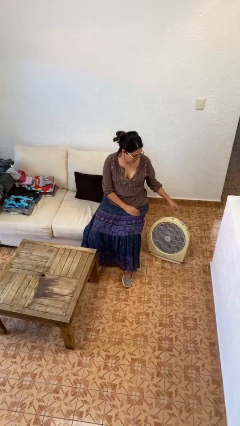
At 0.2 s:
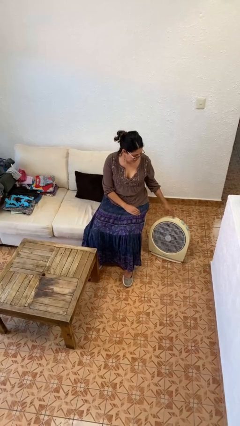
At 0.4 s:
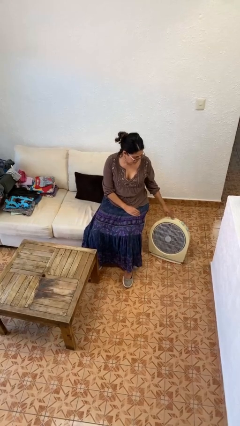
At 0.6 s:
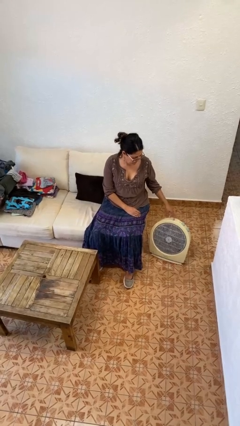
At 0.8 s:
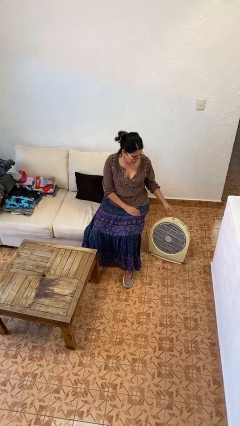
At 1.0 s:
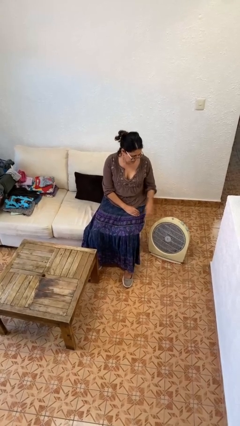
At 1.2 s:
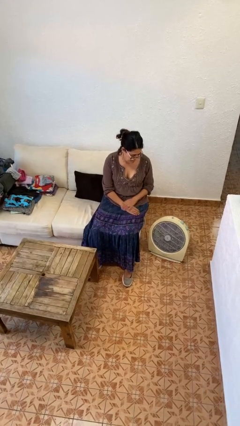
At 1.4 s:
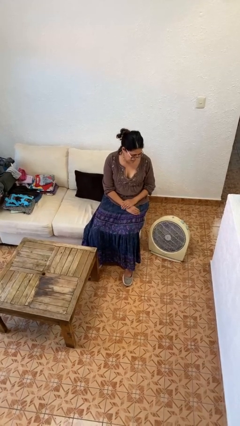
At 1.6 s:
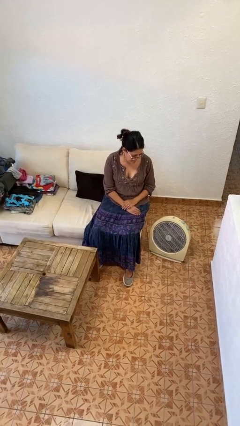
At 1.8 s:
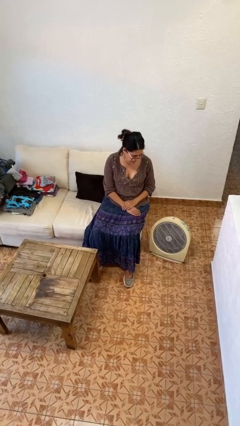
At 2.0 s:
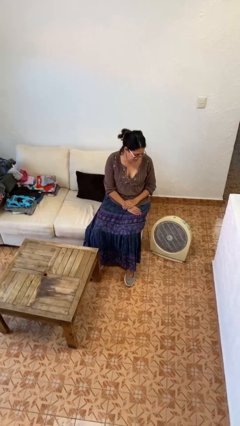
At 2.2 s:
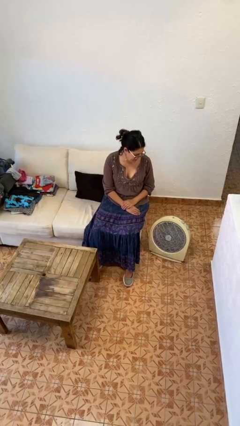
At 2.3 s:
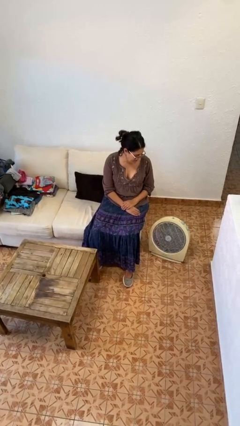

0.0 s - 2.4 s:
person turns on fan

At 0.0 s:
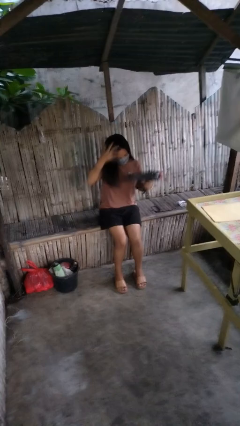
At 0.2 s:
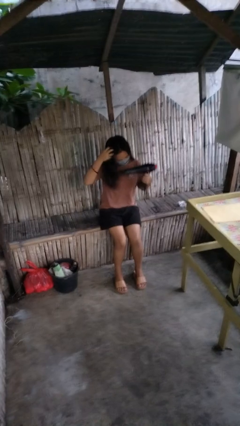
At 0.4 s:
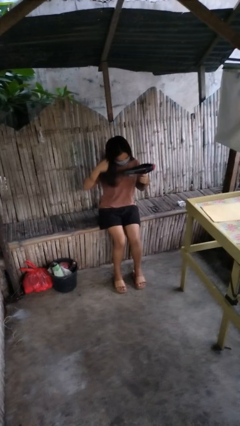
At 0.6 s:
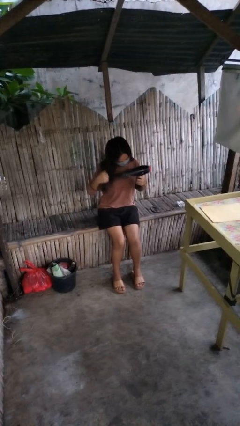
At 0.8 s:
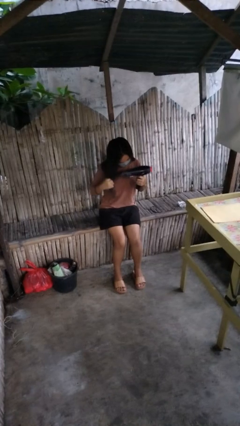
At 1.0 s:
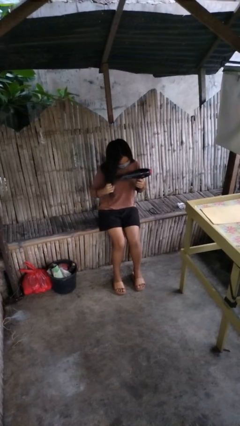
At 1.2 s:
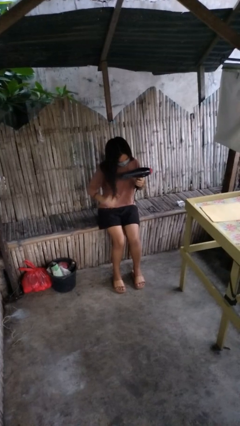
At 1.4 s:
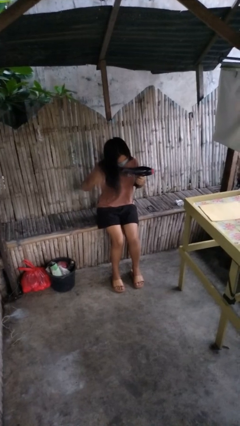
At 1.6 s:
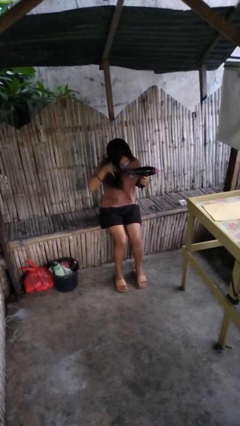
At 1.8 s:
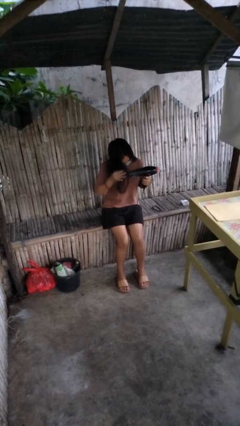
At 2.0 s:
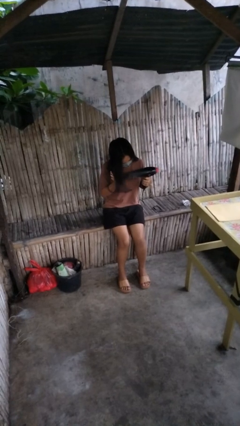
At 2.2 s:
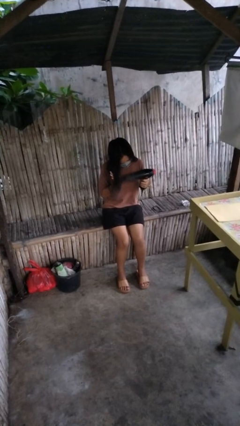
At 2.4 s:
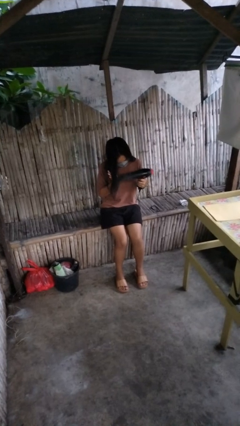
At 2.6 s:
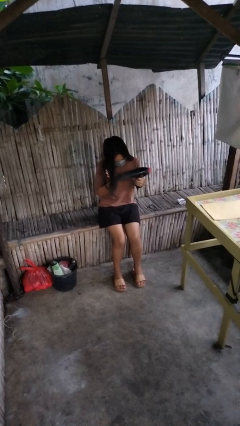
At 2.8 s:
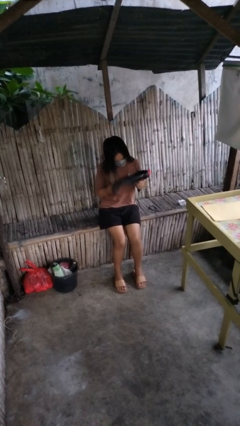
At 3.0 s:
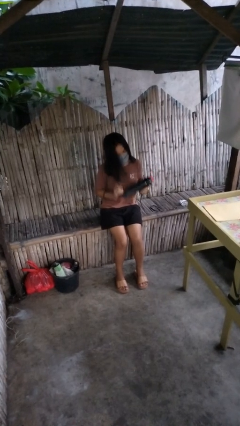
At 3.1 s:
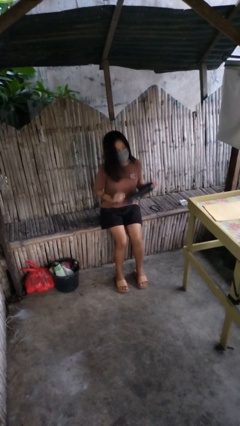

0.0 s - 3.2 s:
person dries hair with hairdryer

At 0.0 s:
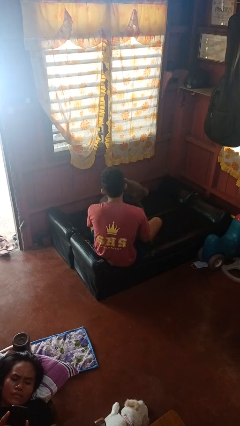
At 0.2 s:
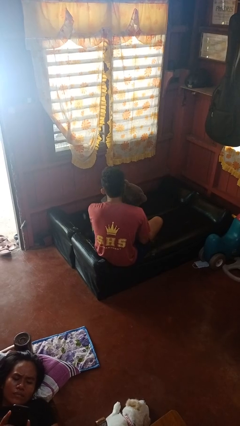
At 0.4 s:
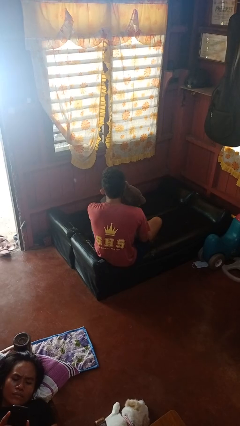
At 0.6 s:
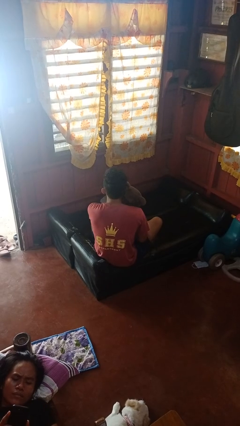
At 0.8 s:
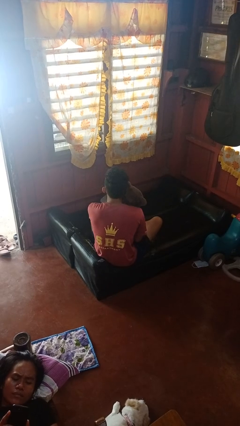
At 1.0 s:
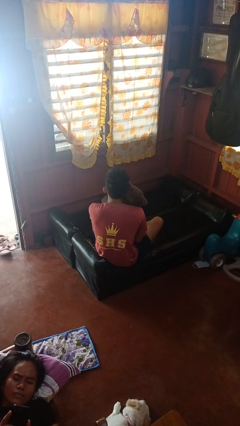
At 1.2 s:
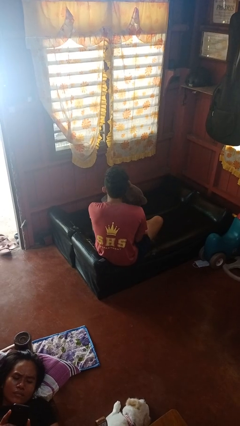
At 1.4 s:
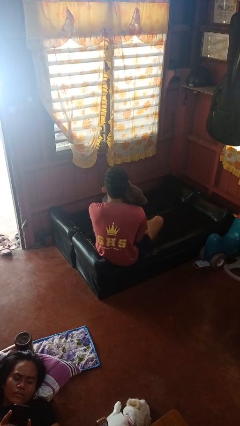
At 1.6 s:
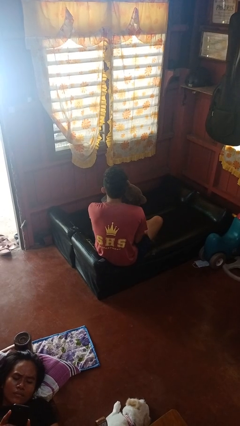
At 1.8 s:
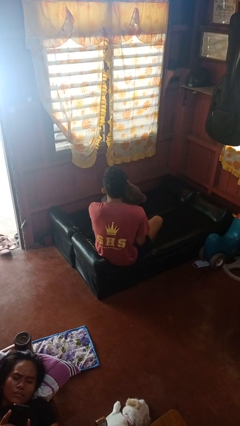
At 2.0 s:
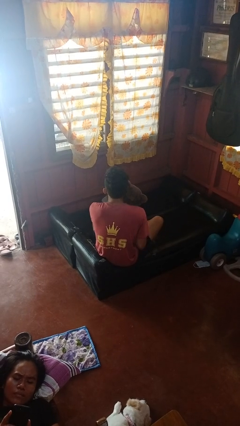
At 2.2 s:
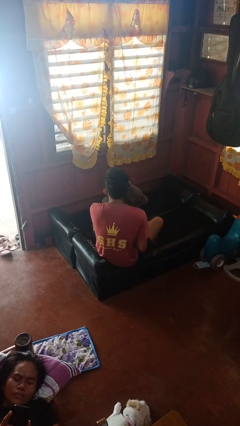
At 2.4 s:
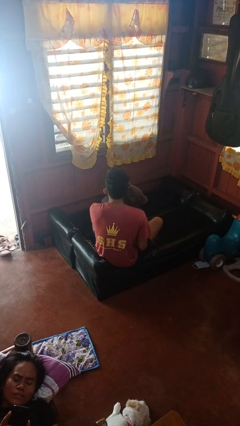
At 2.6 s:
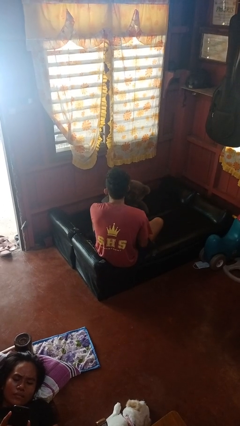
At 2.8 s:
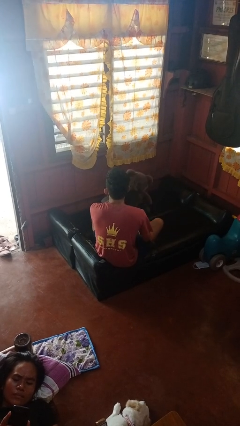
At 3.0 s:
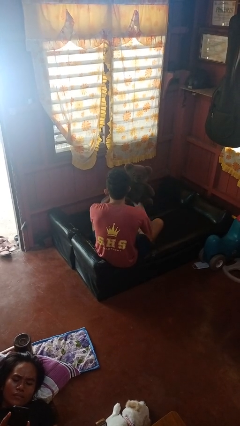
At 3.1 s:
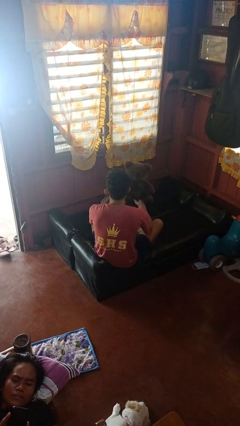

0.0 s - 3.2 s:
person hugs stuffed animal

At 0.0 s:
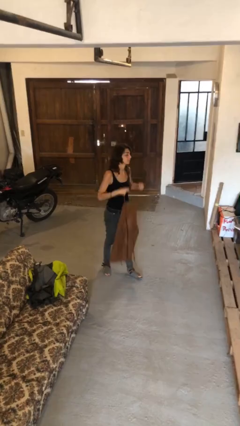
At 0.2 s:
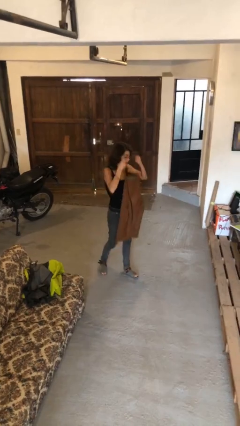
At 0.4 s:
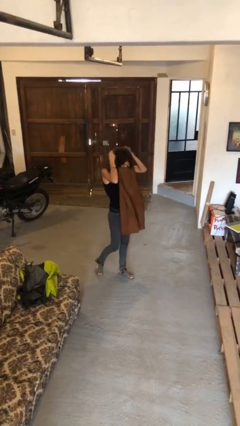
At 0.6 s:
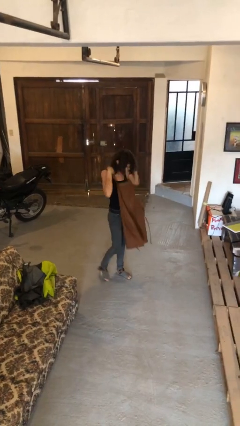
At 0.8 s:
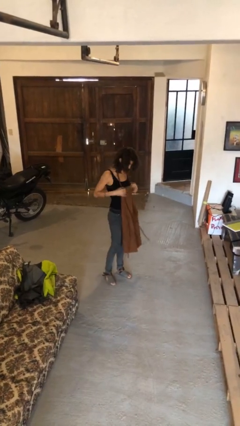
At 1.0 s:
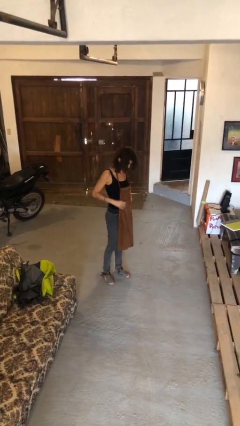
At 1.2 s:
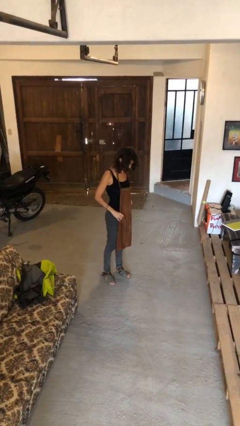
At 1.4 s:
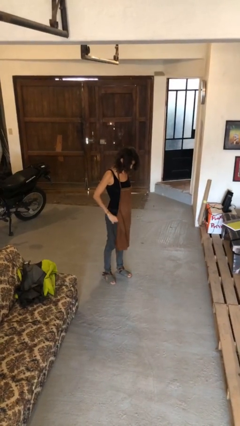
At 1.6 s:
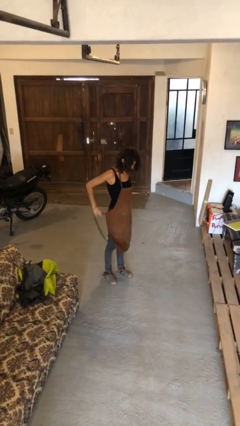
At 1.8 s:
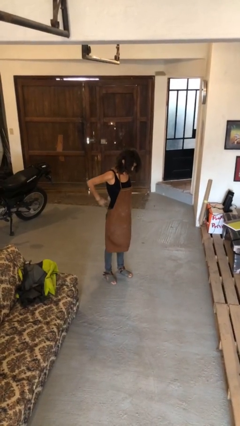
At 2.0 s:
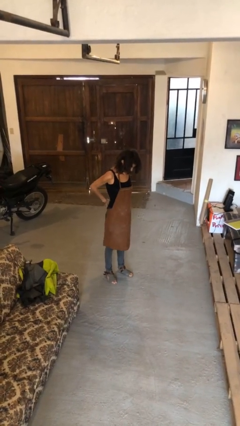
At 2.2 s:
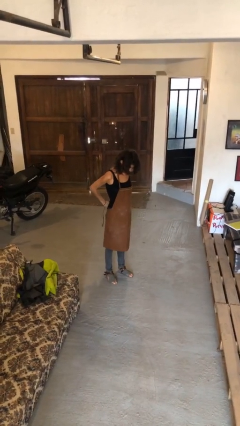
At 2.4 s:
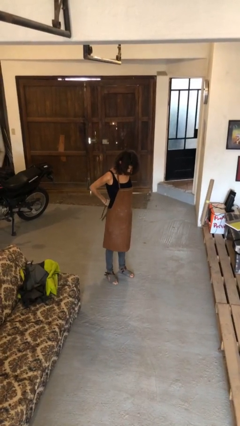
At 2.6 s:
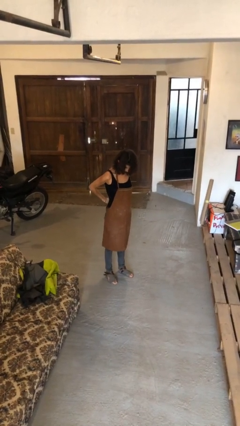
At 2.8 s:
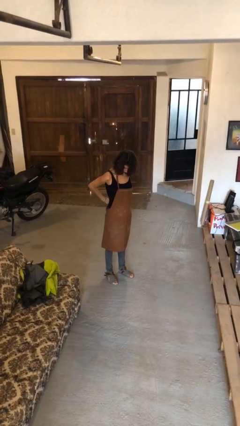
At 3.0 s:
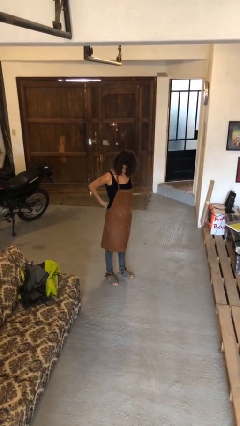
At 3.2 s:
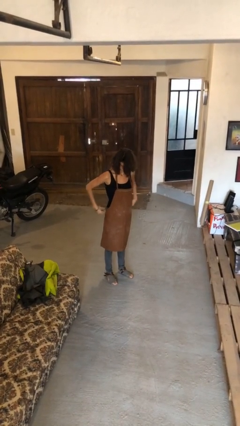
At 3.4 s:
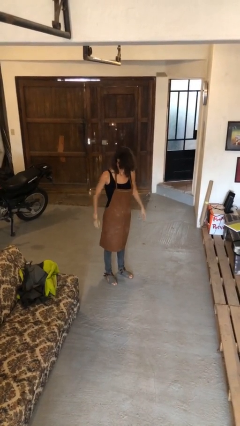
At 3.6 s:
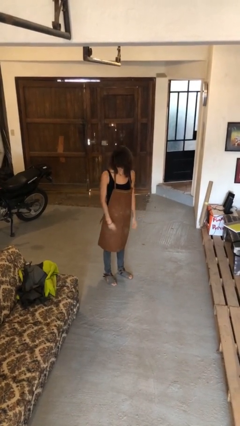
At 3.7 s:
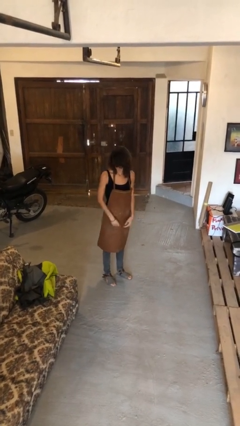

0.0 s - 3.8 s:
person puts on apron

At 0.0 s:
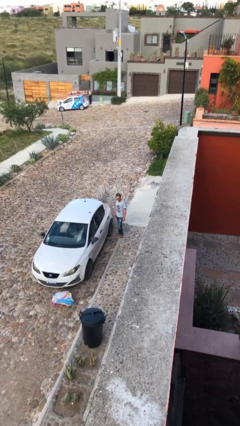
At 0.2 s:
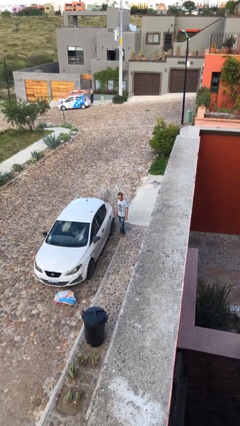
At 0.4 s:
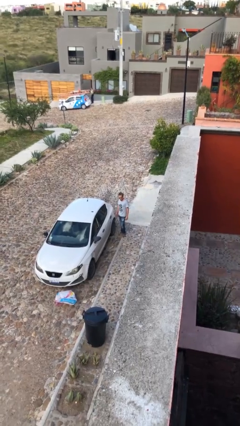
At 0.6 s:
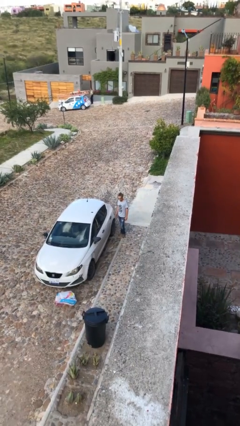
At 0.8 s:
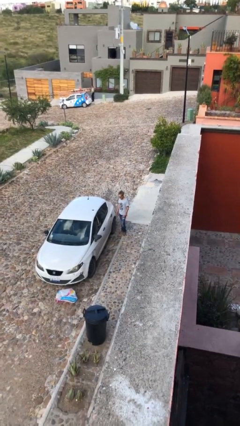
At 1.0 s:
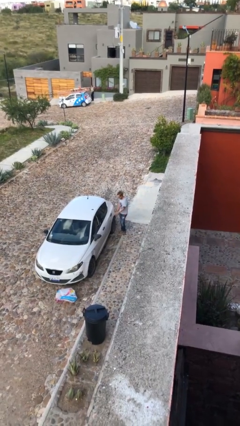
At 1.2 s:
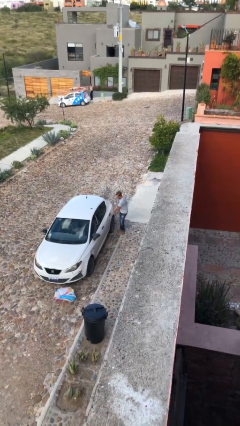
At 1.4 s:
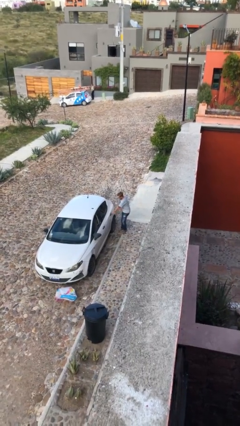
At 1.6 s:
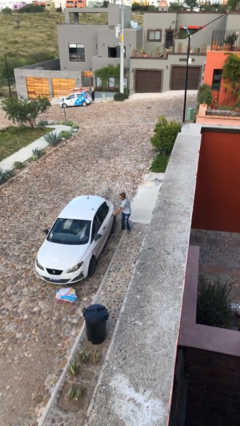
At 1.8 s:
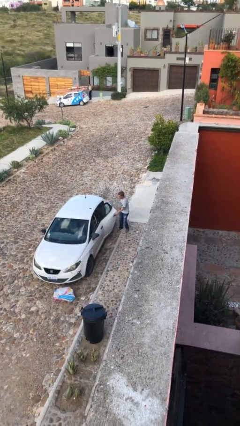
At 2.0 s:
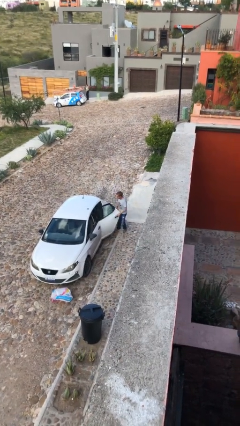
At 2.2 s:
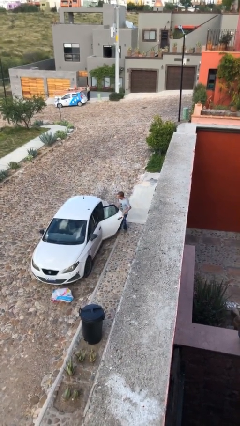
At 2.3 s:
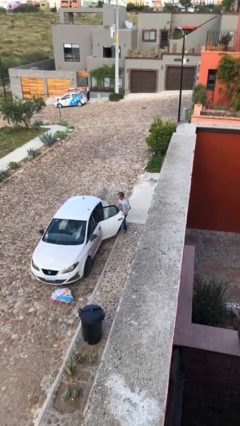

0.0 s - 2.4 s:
person opens car door

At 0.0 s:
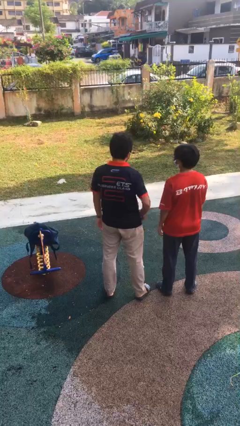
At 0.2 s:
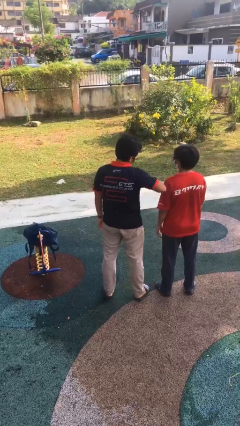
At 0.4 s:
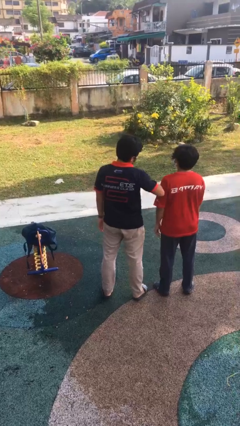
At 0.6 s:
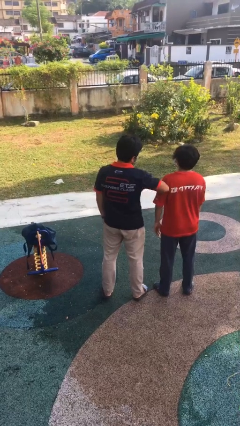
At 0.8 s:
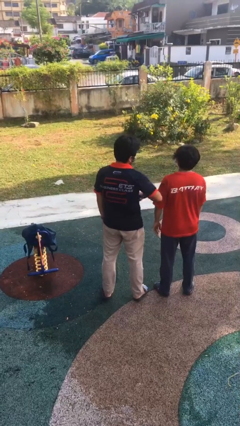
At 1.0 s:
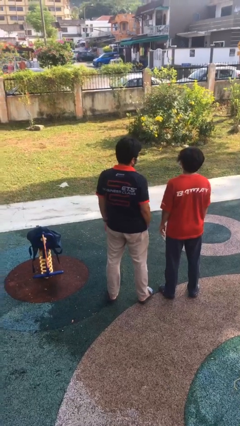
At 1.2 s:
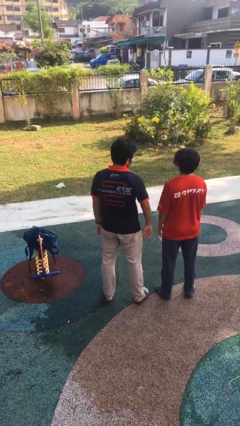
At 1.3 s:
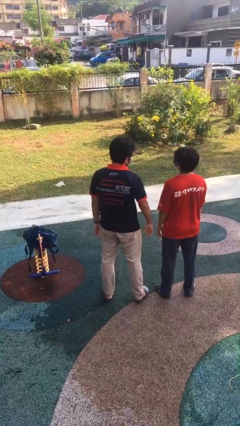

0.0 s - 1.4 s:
person nudges person with elbow

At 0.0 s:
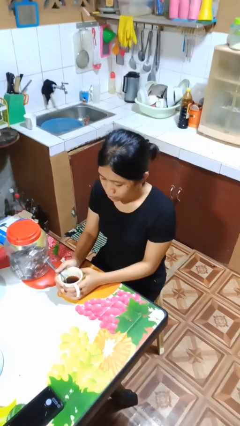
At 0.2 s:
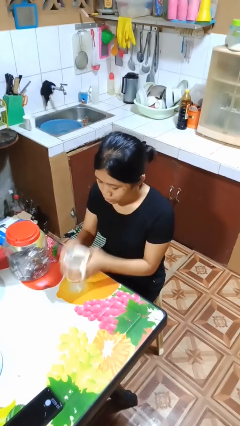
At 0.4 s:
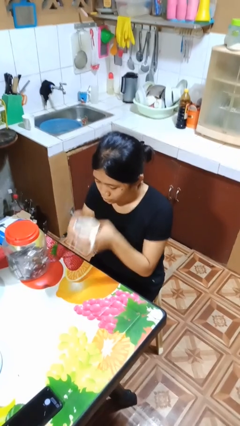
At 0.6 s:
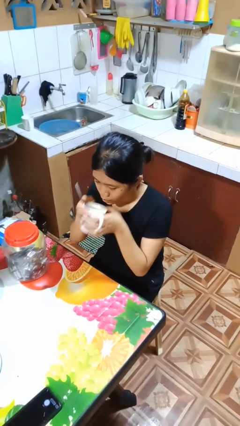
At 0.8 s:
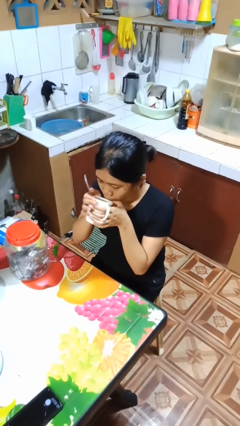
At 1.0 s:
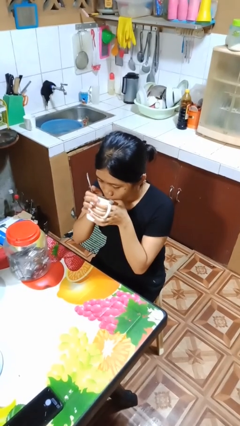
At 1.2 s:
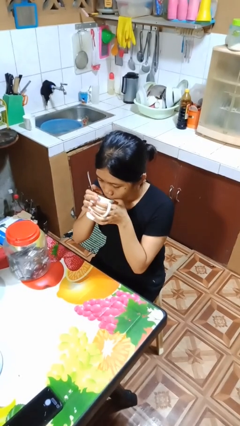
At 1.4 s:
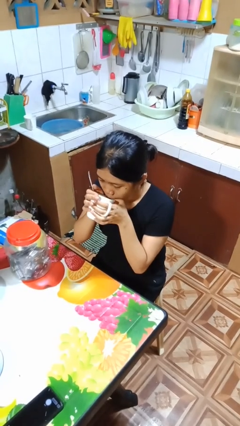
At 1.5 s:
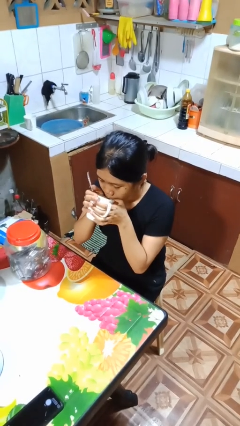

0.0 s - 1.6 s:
person drinks from mug
